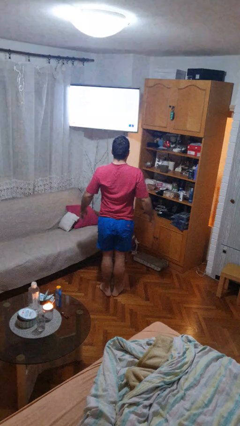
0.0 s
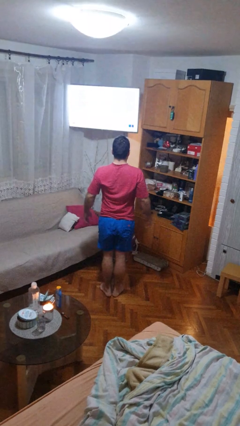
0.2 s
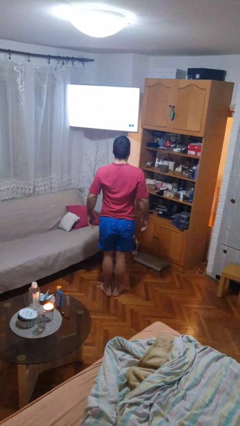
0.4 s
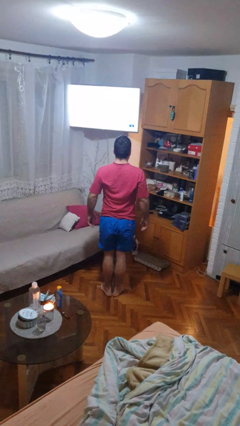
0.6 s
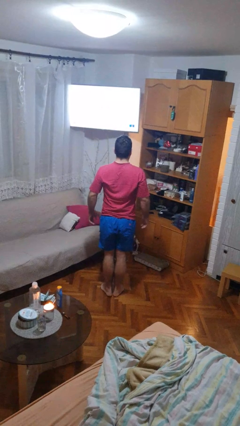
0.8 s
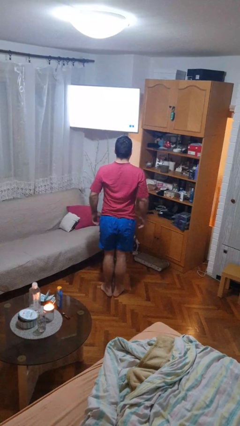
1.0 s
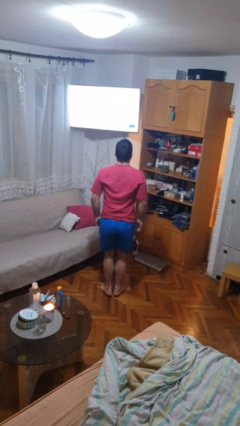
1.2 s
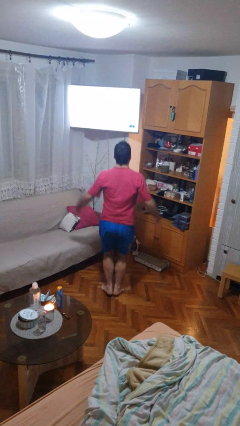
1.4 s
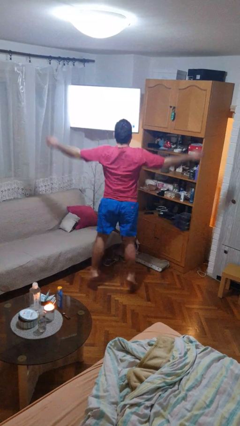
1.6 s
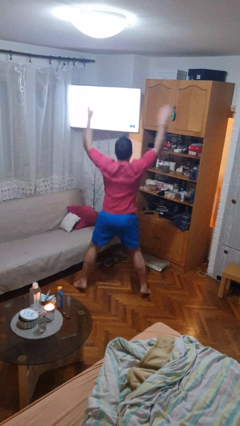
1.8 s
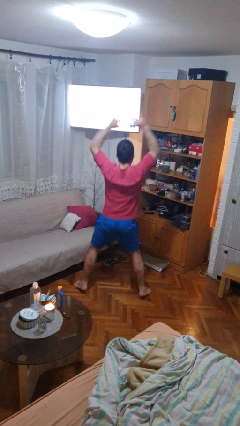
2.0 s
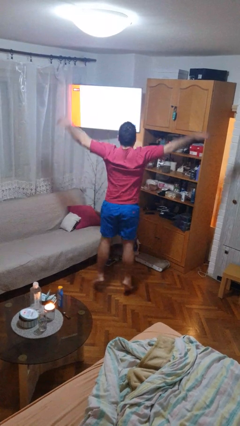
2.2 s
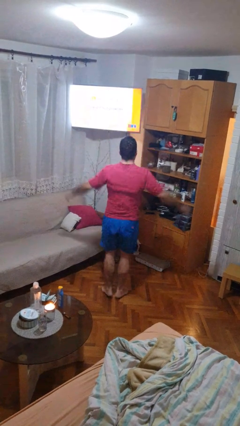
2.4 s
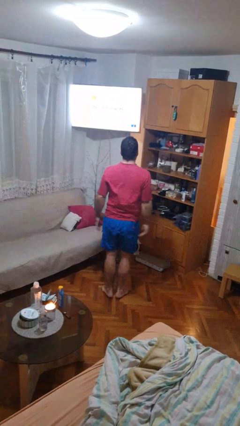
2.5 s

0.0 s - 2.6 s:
person exercises with jumping jacks

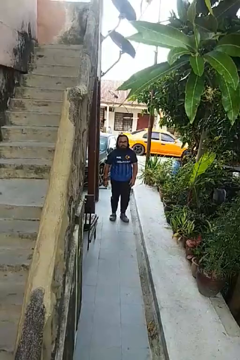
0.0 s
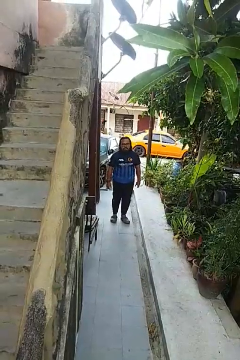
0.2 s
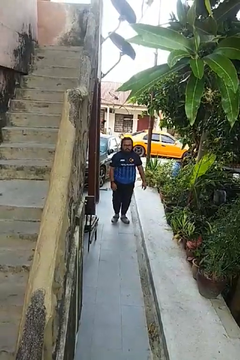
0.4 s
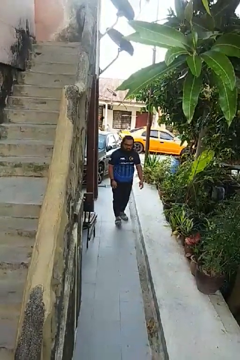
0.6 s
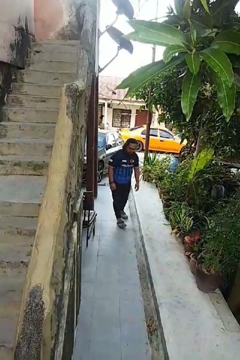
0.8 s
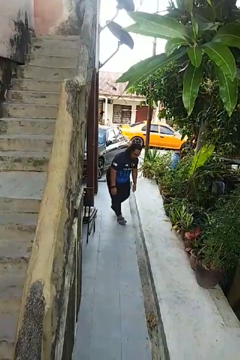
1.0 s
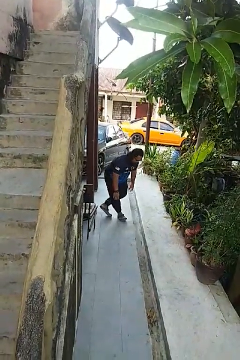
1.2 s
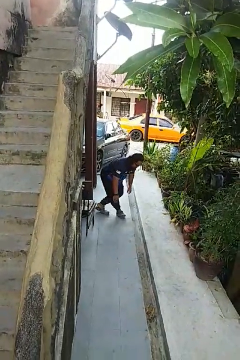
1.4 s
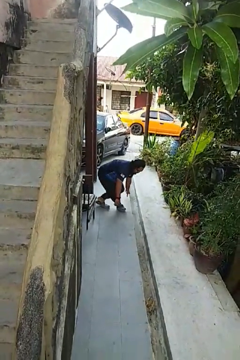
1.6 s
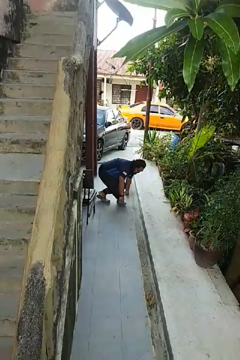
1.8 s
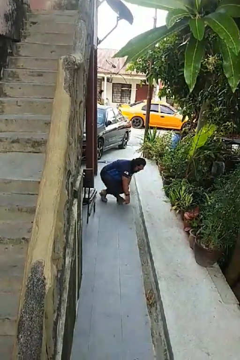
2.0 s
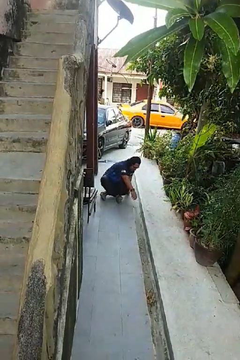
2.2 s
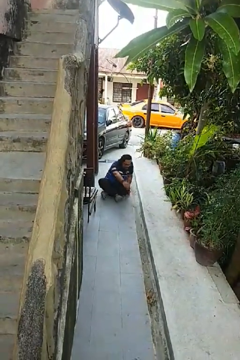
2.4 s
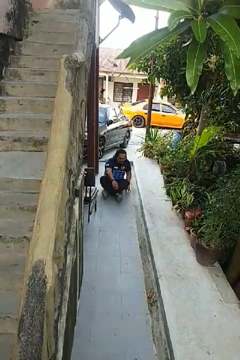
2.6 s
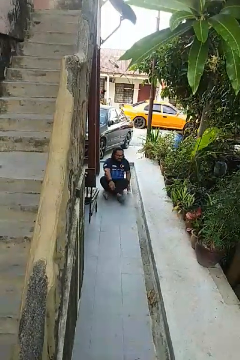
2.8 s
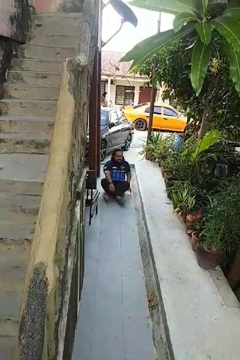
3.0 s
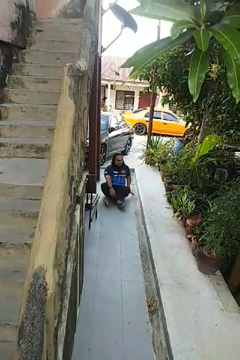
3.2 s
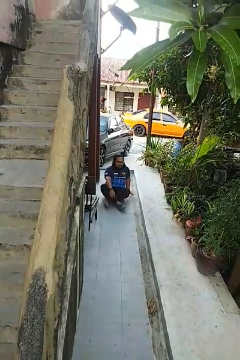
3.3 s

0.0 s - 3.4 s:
person sits crisscross

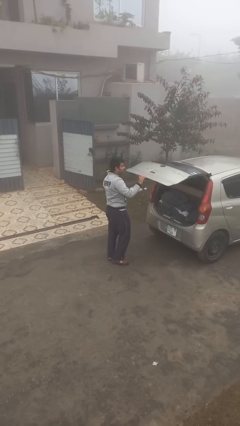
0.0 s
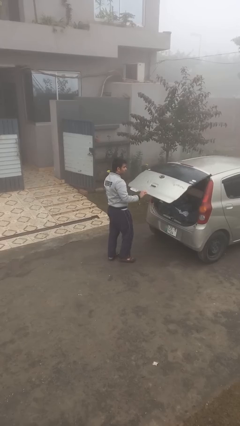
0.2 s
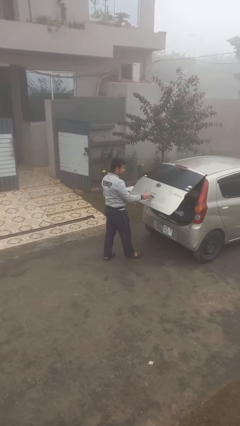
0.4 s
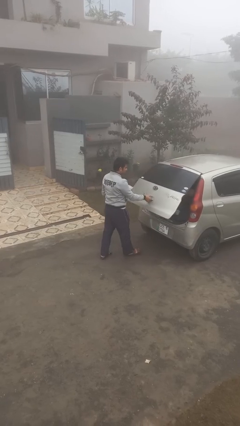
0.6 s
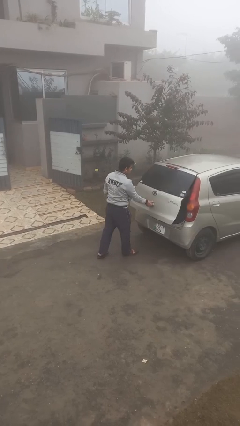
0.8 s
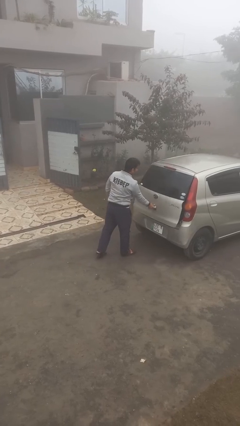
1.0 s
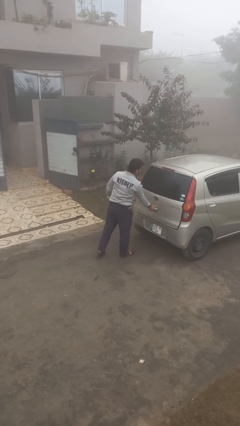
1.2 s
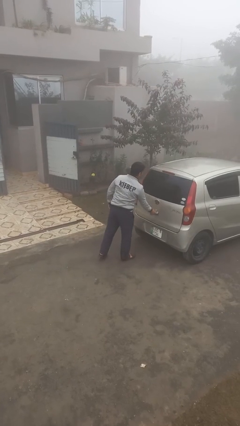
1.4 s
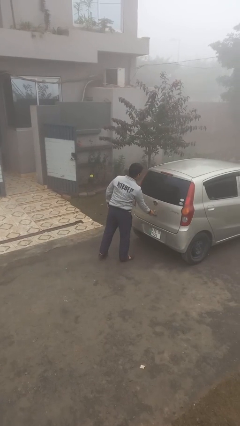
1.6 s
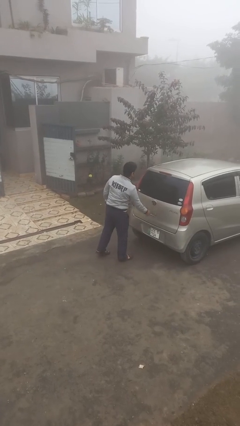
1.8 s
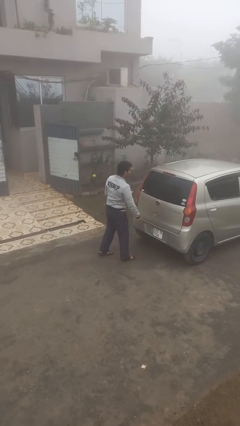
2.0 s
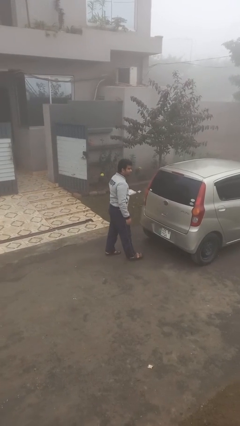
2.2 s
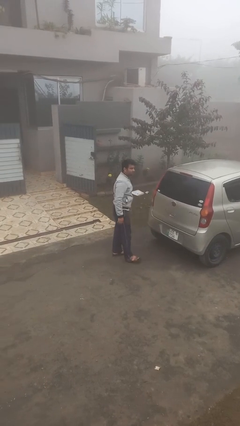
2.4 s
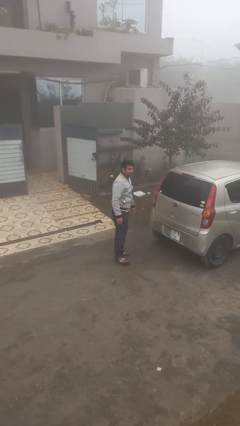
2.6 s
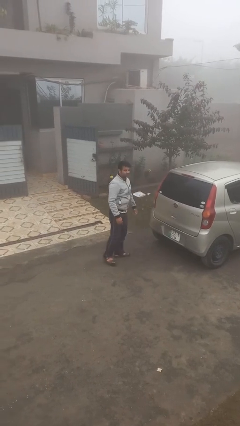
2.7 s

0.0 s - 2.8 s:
person closes car trunk

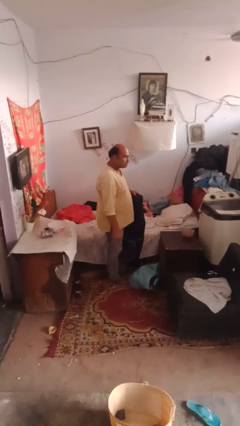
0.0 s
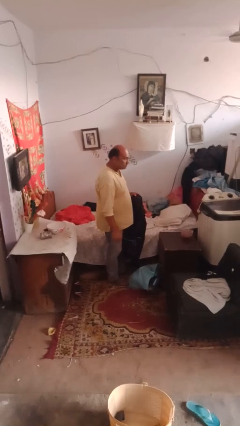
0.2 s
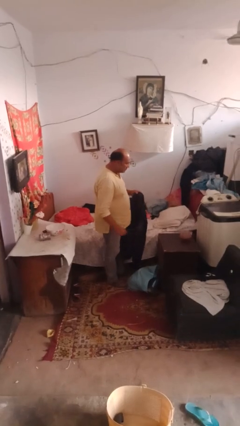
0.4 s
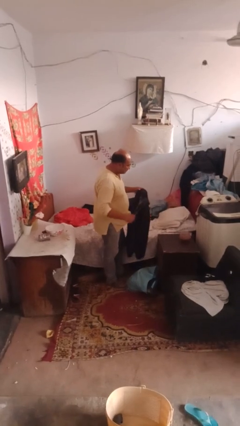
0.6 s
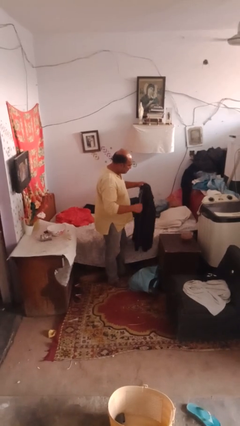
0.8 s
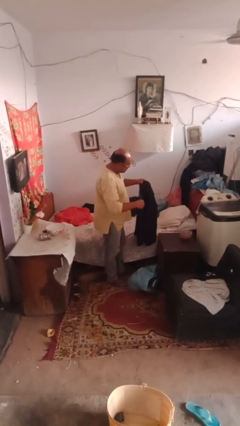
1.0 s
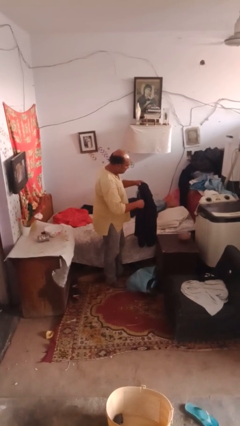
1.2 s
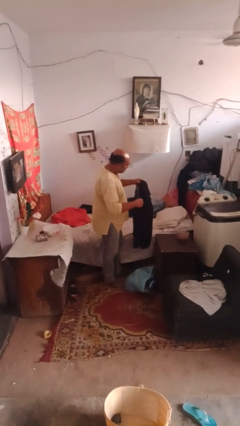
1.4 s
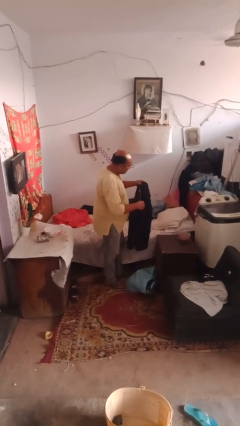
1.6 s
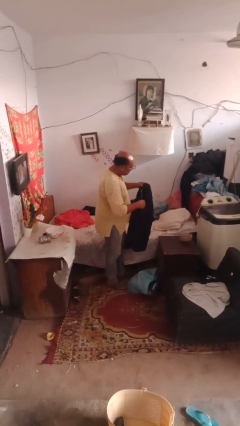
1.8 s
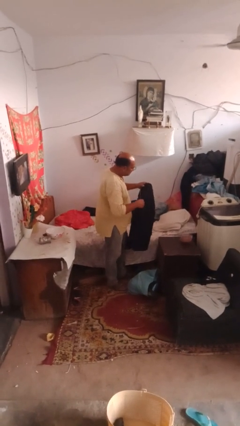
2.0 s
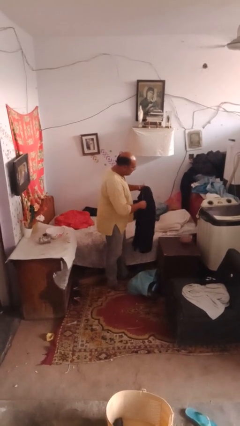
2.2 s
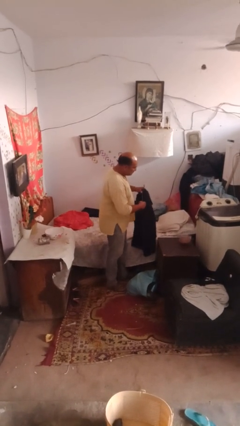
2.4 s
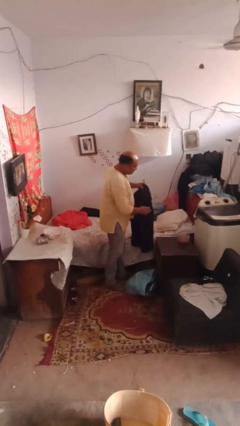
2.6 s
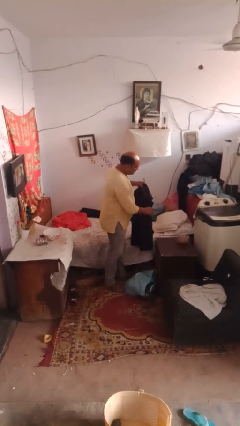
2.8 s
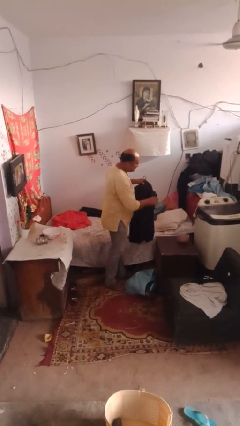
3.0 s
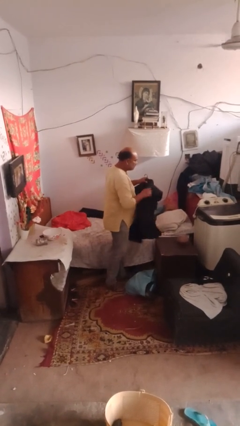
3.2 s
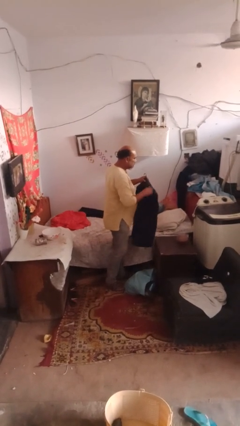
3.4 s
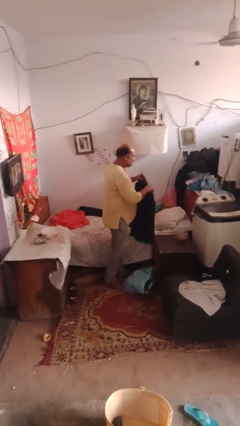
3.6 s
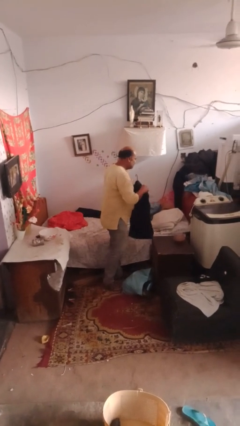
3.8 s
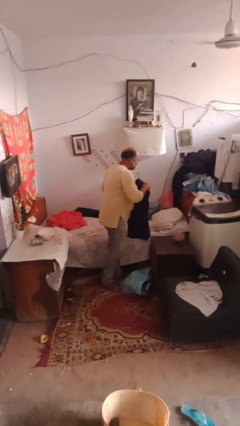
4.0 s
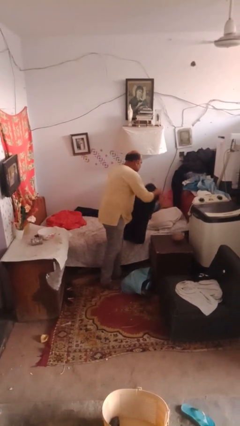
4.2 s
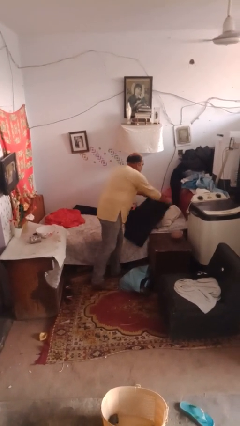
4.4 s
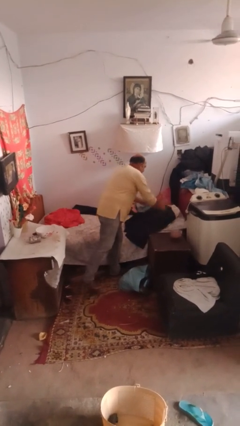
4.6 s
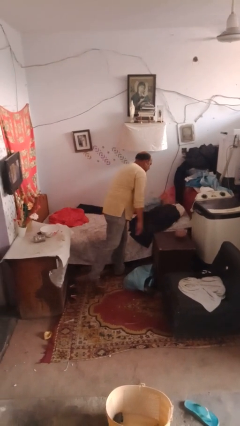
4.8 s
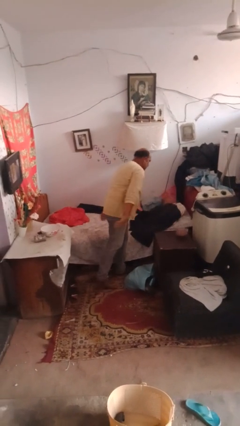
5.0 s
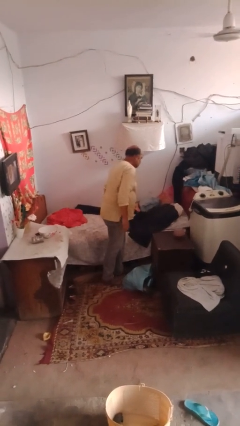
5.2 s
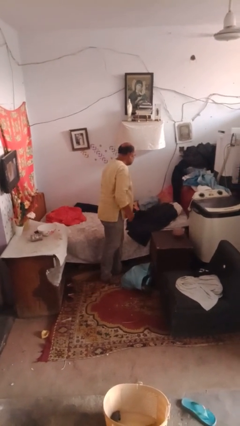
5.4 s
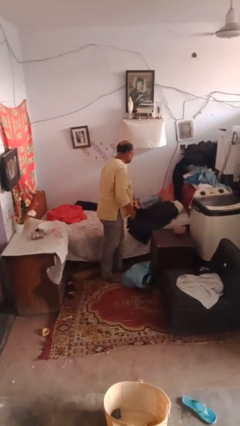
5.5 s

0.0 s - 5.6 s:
person puts clothes into closet

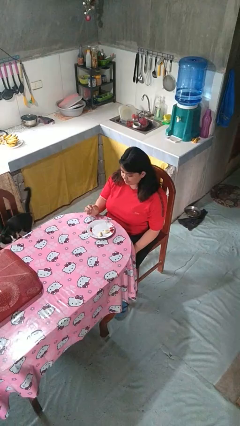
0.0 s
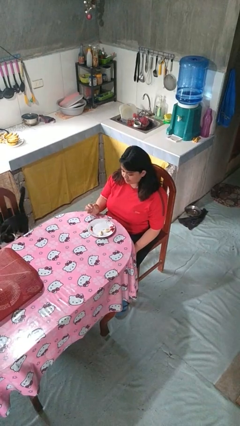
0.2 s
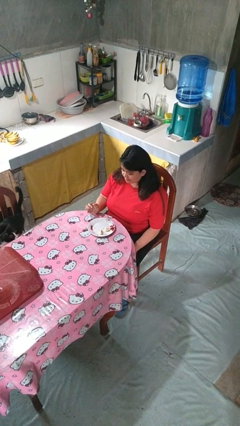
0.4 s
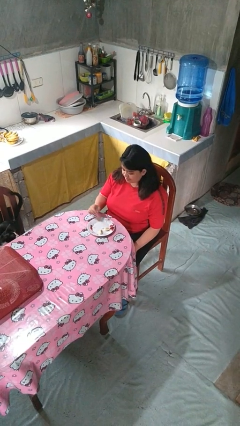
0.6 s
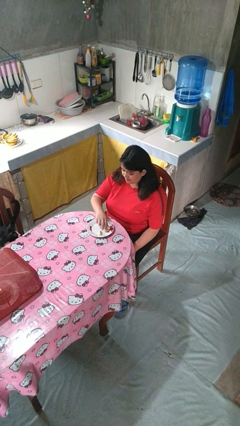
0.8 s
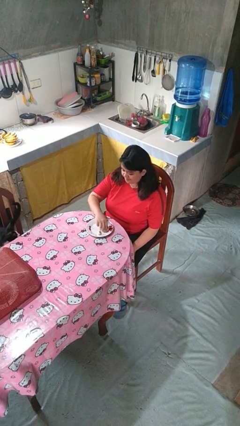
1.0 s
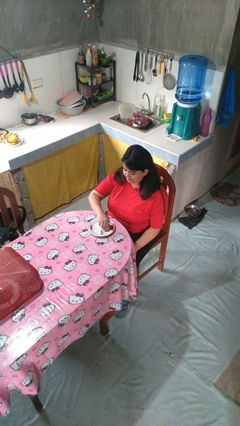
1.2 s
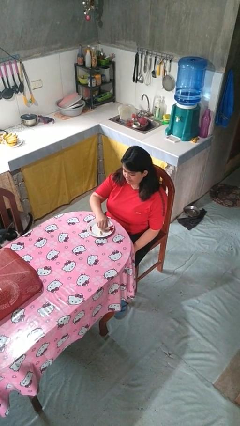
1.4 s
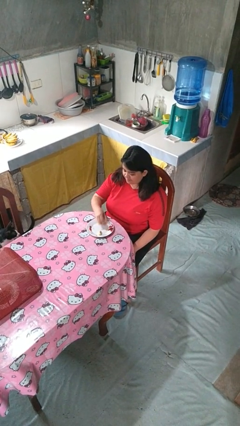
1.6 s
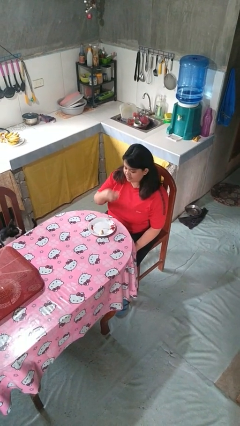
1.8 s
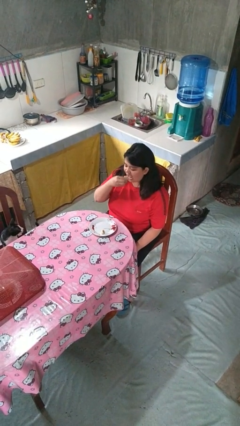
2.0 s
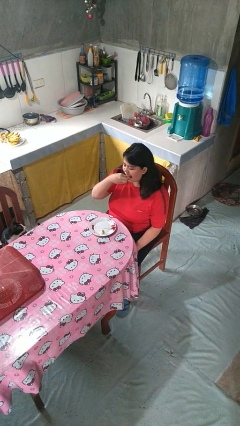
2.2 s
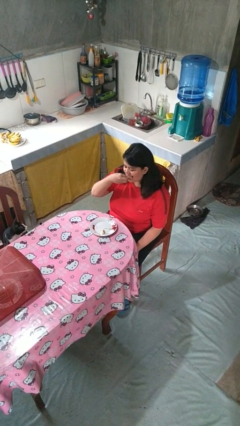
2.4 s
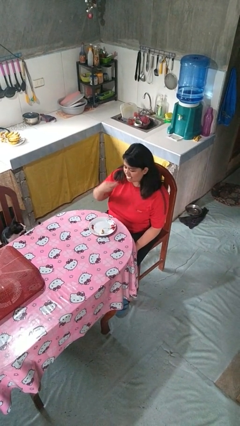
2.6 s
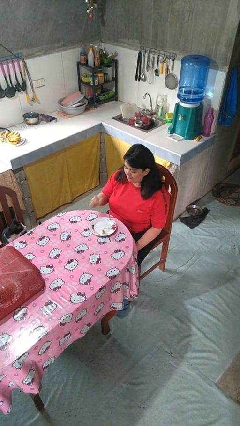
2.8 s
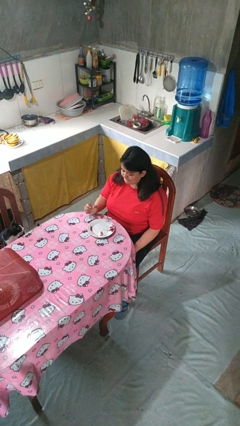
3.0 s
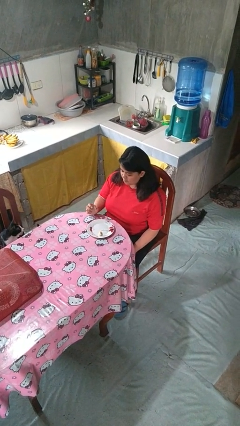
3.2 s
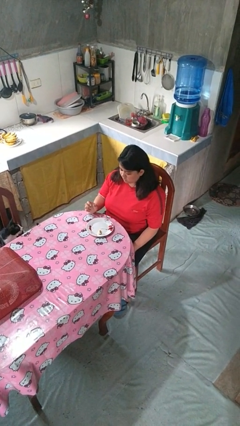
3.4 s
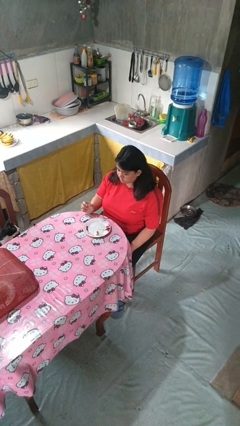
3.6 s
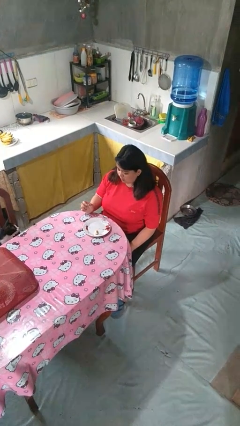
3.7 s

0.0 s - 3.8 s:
person eats with hands

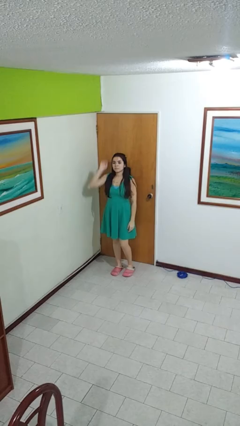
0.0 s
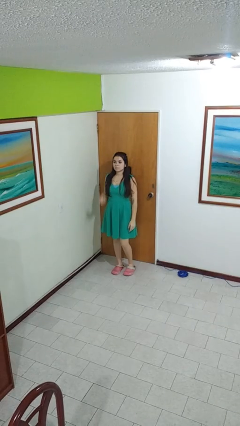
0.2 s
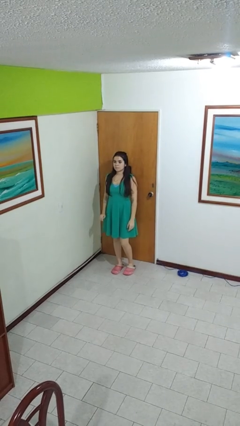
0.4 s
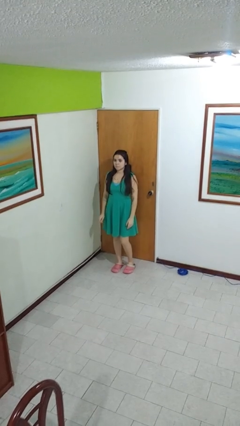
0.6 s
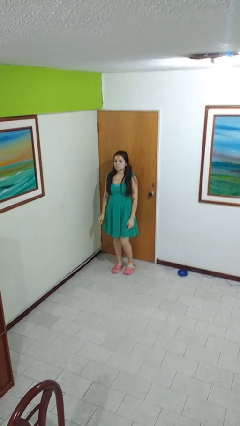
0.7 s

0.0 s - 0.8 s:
person gestures lower hand
